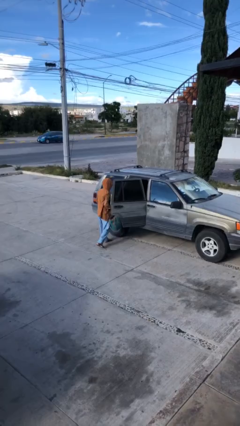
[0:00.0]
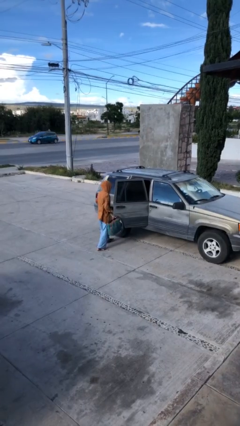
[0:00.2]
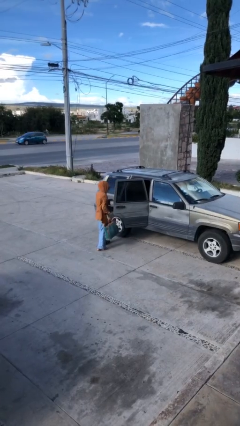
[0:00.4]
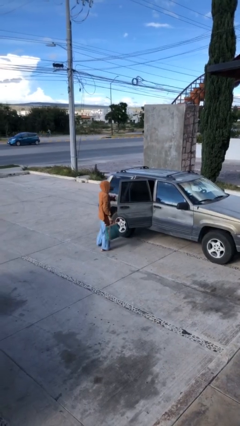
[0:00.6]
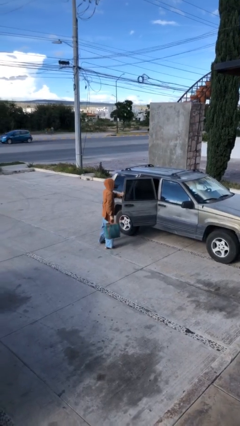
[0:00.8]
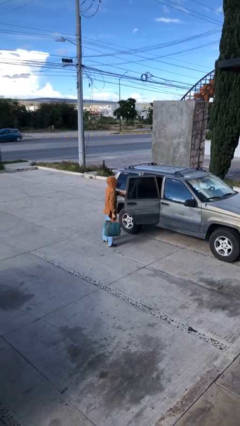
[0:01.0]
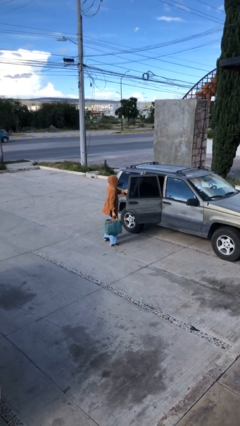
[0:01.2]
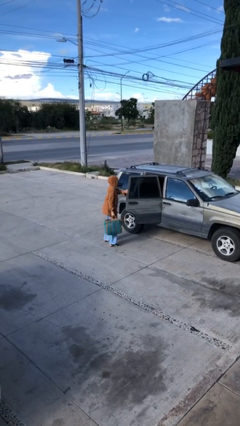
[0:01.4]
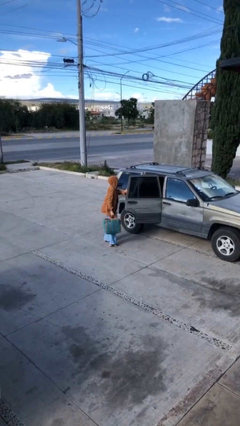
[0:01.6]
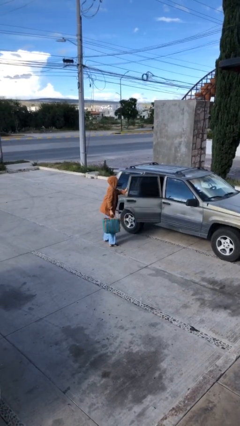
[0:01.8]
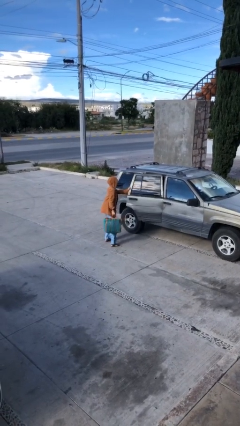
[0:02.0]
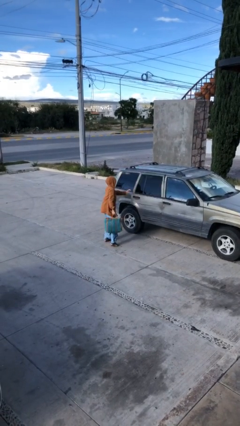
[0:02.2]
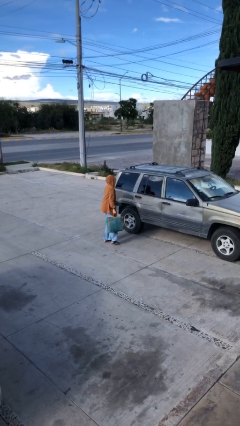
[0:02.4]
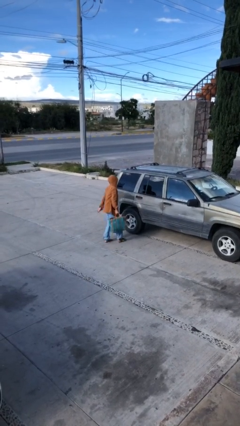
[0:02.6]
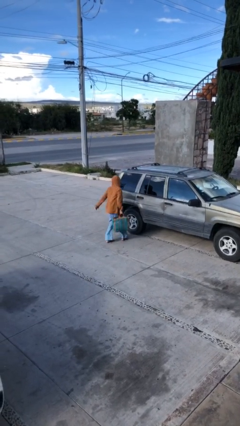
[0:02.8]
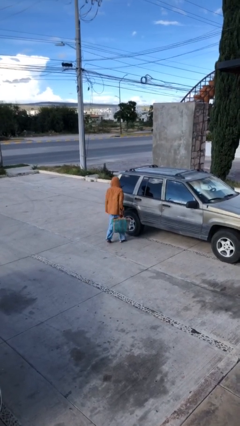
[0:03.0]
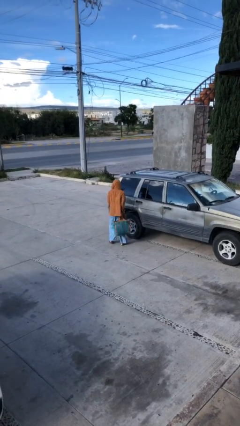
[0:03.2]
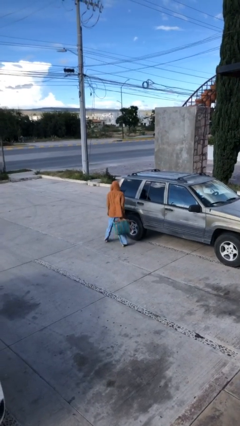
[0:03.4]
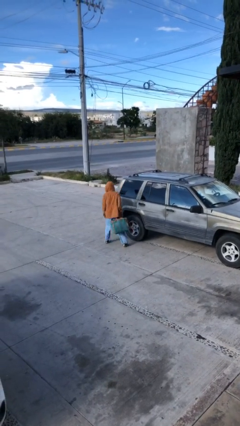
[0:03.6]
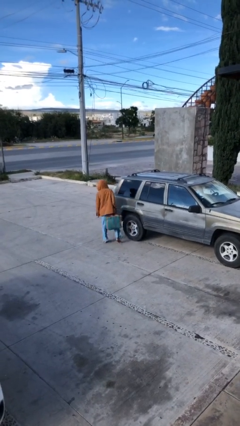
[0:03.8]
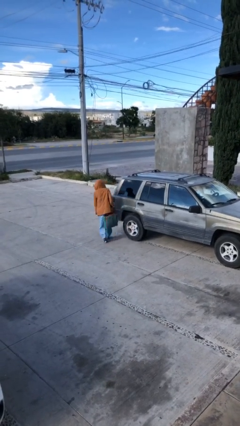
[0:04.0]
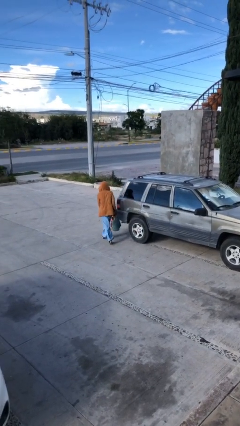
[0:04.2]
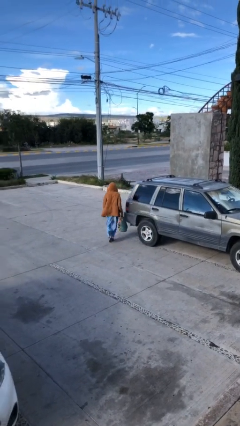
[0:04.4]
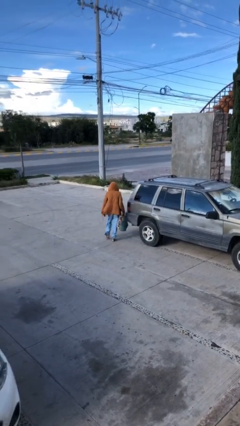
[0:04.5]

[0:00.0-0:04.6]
person closes car door

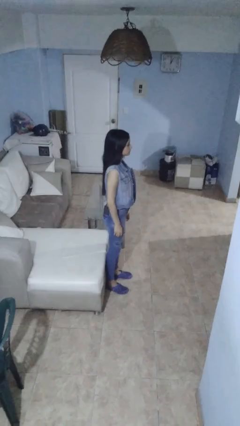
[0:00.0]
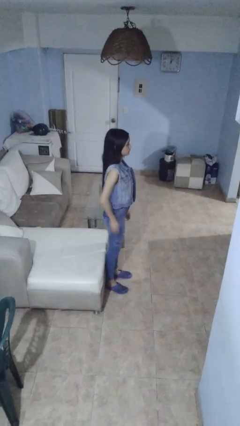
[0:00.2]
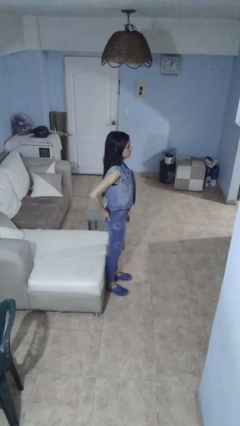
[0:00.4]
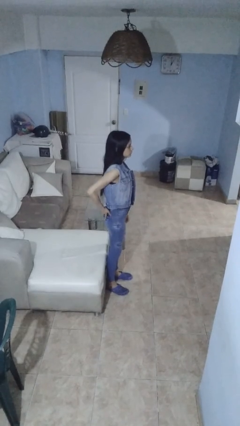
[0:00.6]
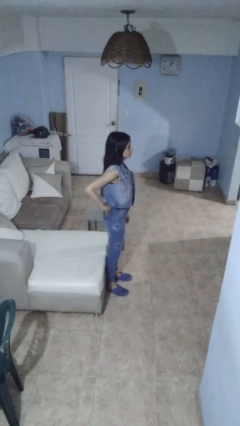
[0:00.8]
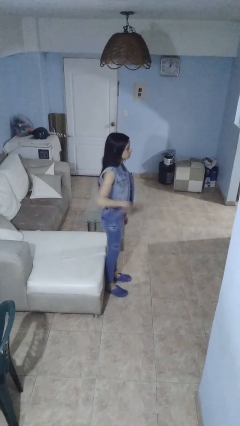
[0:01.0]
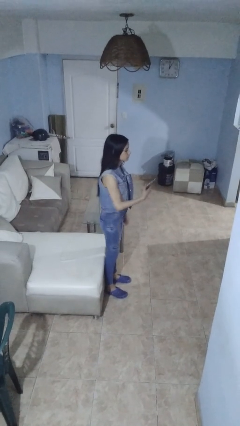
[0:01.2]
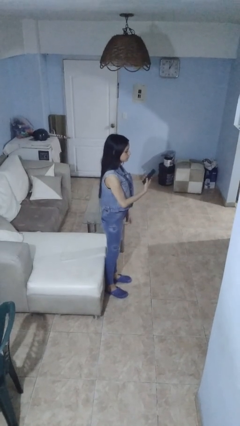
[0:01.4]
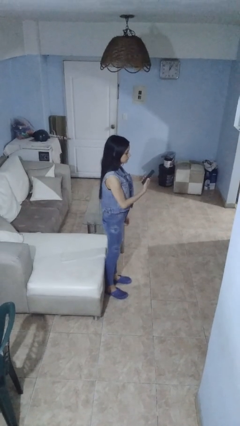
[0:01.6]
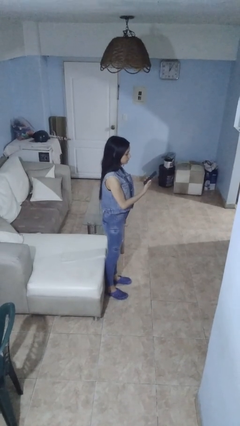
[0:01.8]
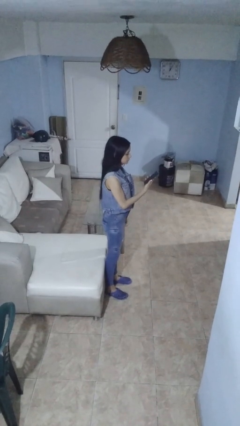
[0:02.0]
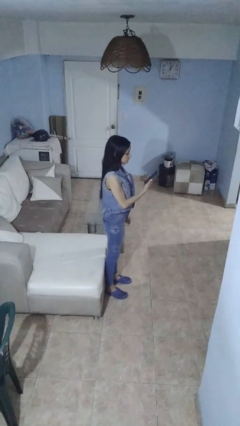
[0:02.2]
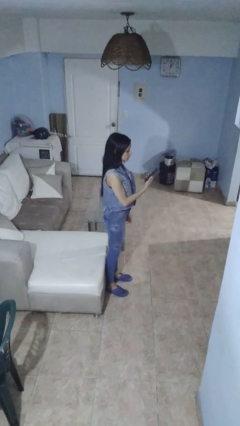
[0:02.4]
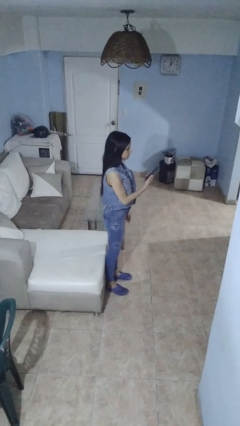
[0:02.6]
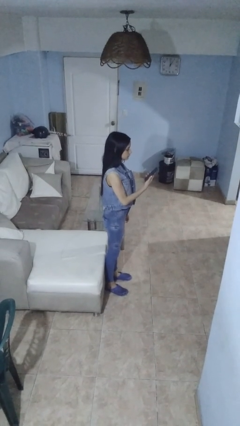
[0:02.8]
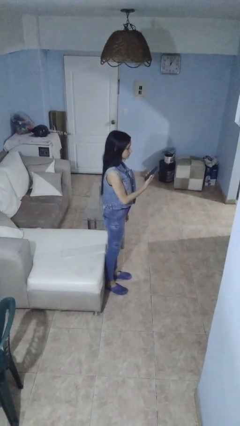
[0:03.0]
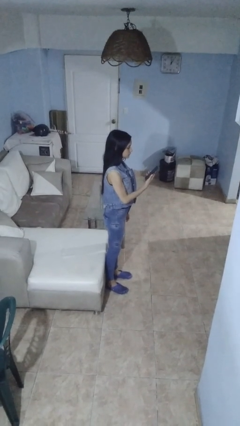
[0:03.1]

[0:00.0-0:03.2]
person takes phone from pocket

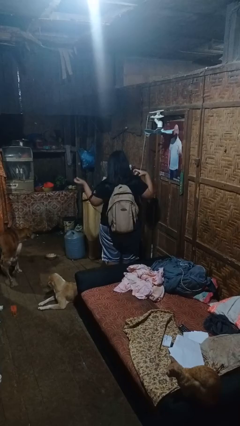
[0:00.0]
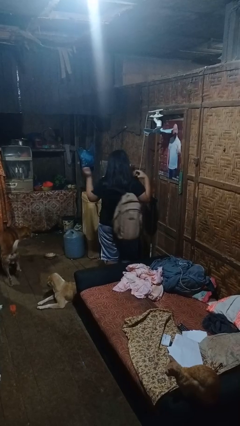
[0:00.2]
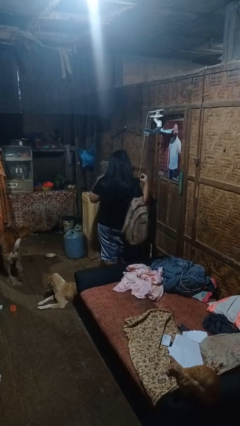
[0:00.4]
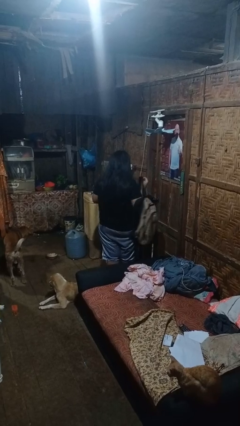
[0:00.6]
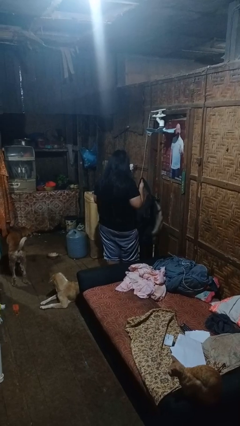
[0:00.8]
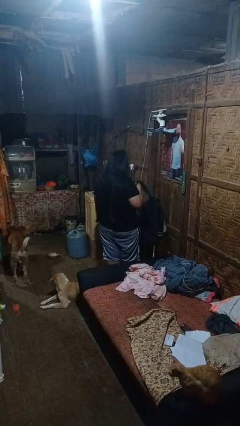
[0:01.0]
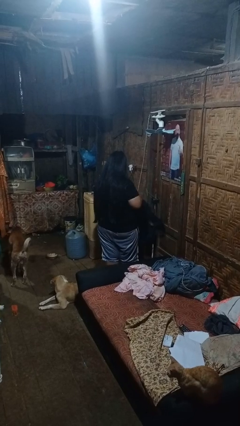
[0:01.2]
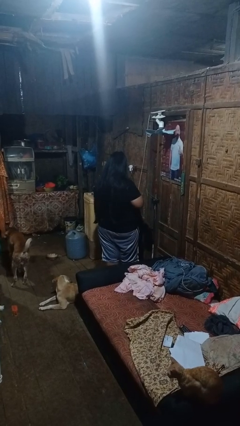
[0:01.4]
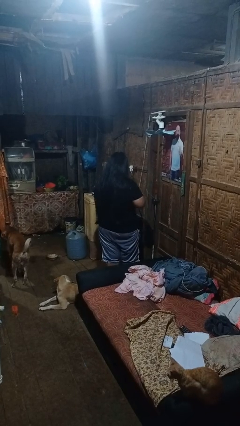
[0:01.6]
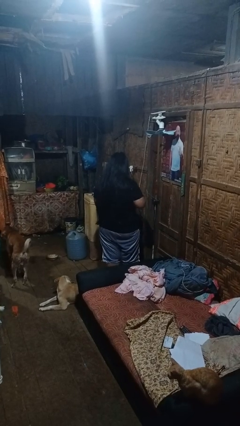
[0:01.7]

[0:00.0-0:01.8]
person takes off backpack

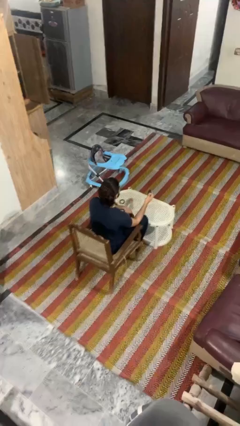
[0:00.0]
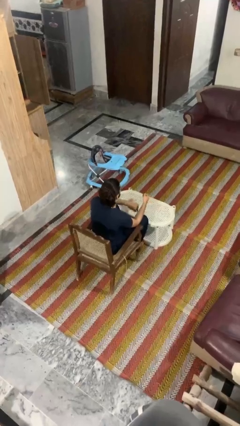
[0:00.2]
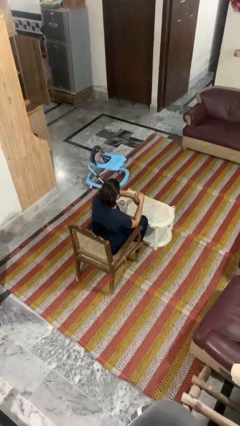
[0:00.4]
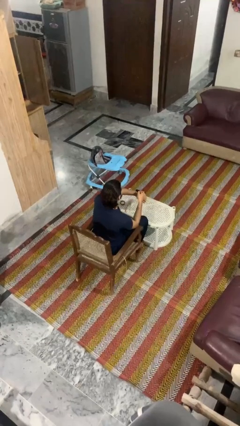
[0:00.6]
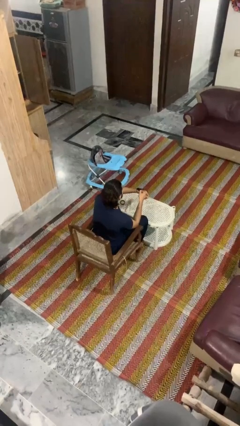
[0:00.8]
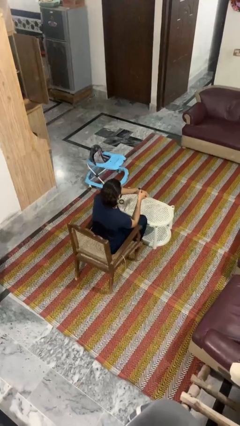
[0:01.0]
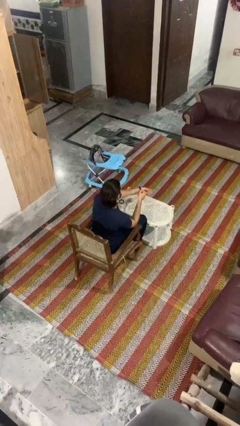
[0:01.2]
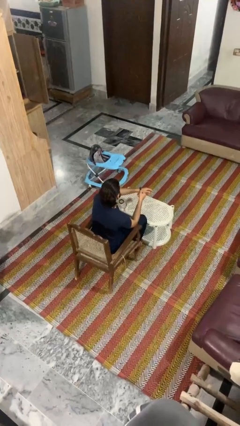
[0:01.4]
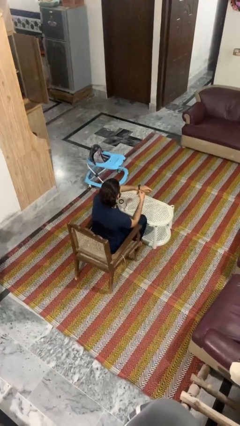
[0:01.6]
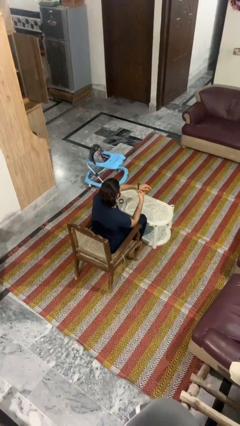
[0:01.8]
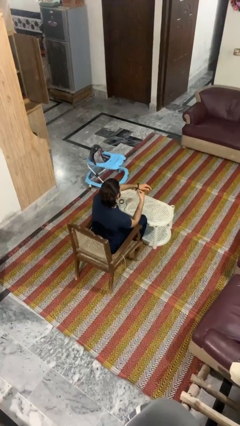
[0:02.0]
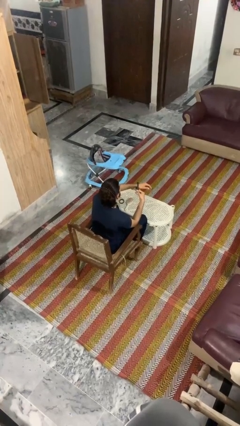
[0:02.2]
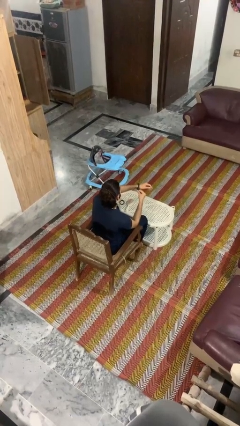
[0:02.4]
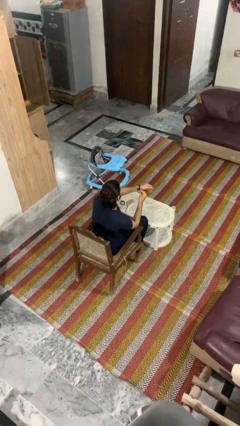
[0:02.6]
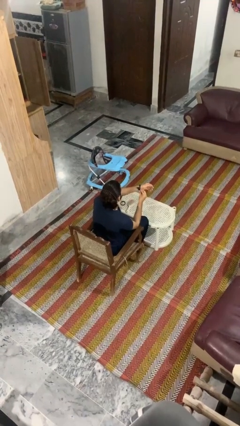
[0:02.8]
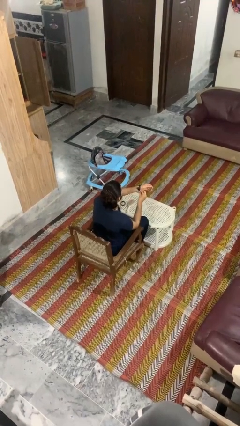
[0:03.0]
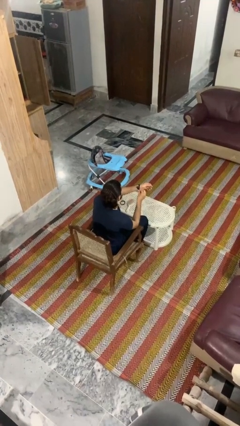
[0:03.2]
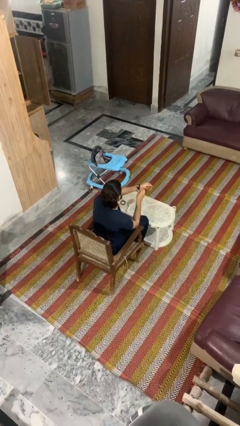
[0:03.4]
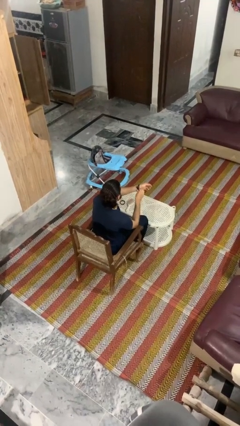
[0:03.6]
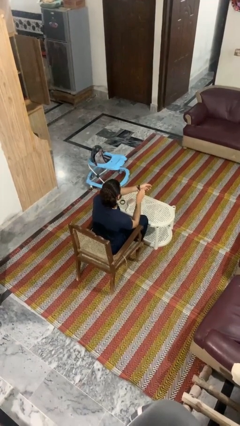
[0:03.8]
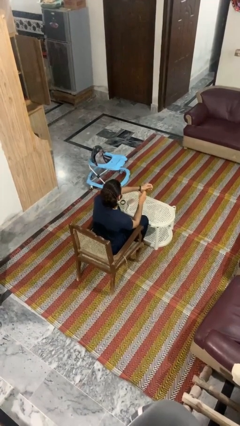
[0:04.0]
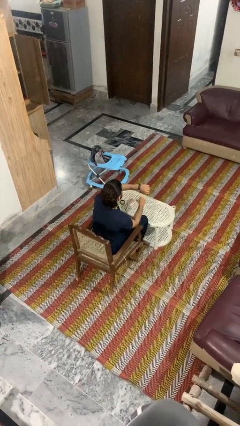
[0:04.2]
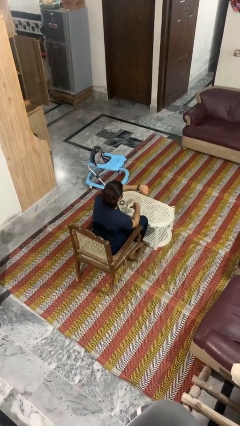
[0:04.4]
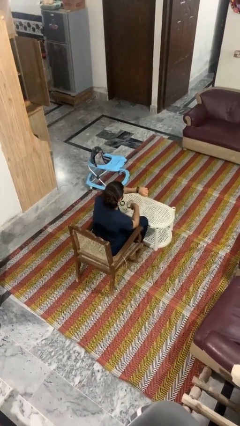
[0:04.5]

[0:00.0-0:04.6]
person puts on wristwatch

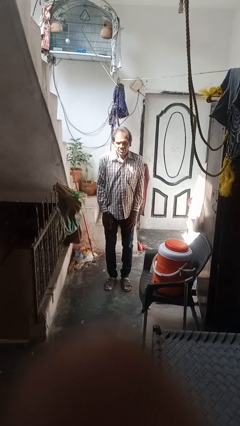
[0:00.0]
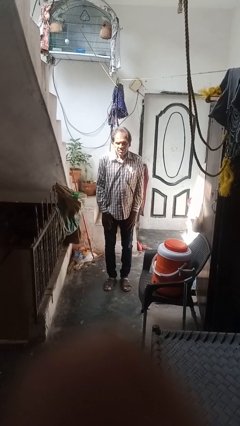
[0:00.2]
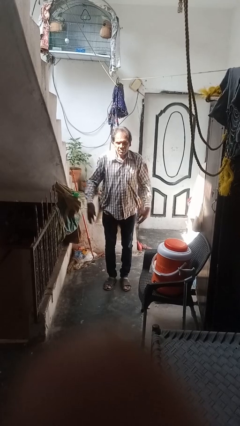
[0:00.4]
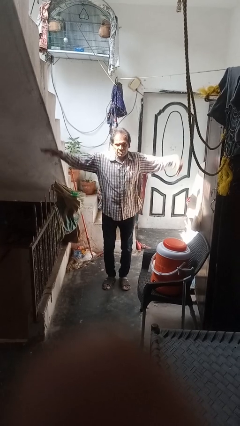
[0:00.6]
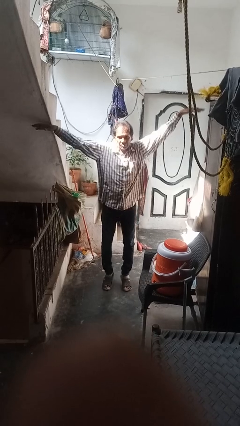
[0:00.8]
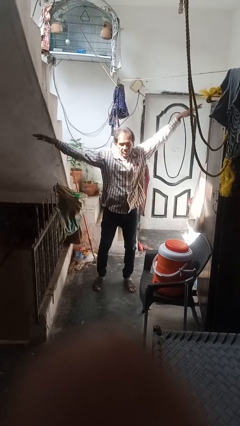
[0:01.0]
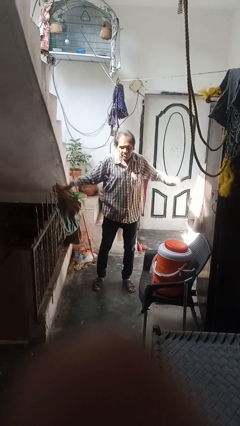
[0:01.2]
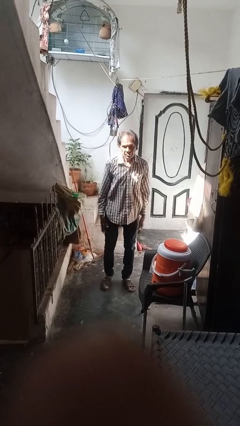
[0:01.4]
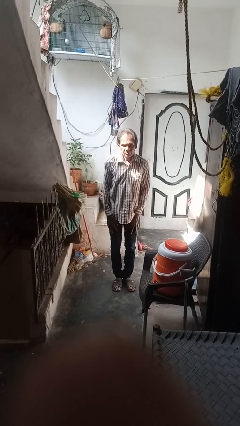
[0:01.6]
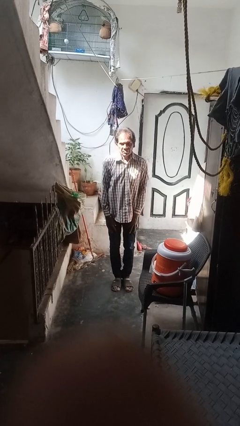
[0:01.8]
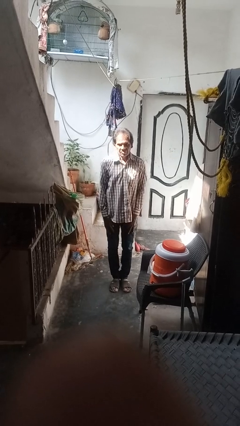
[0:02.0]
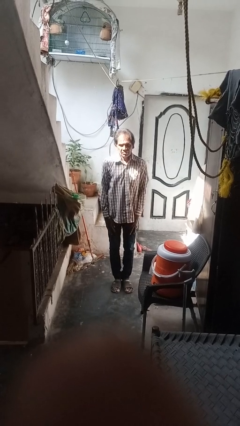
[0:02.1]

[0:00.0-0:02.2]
person exercises with jumping jacks

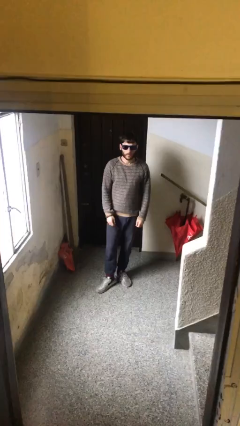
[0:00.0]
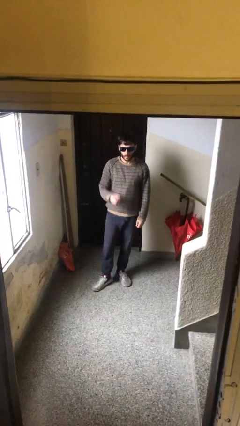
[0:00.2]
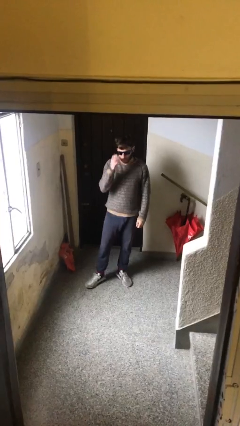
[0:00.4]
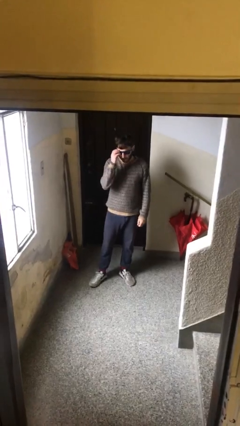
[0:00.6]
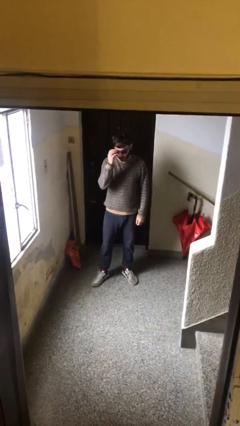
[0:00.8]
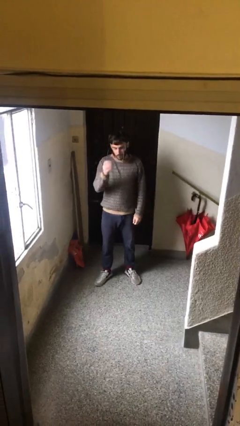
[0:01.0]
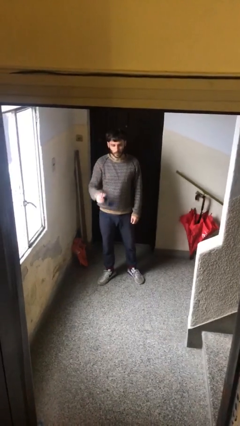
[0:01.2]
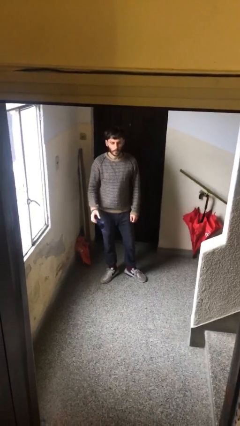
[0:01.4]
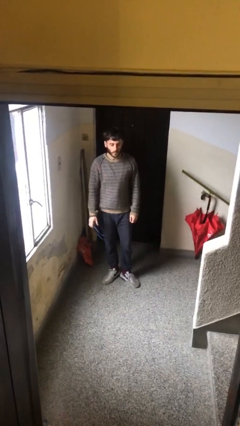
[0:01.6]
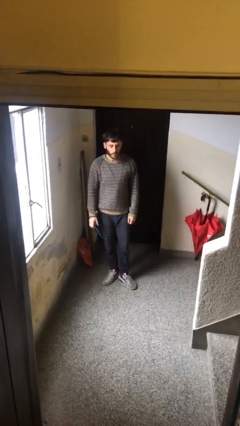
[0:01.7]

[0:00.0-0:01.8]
person takes off sunglasses
